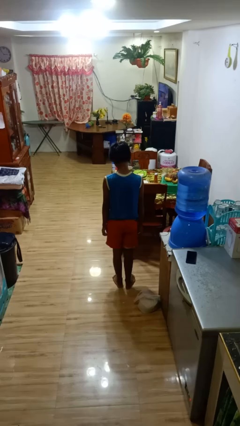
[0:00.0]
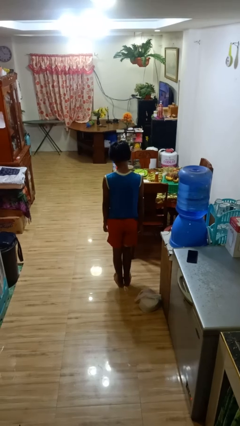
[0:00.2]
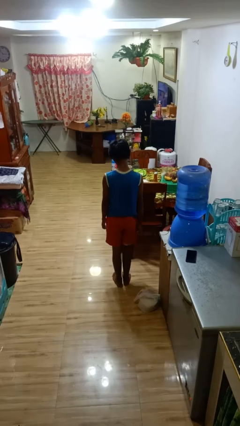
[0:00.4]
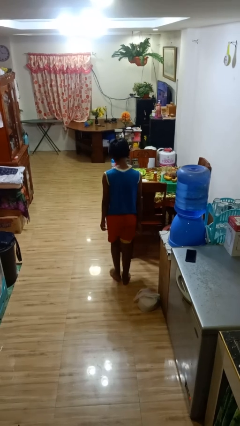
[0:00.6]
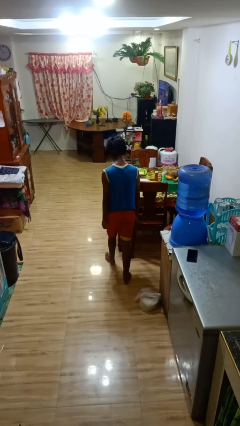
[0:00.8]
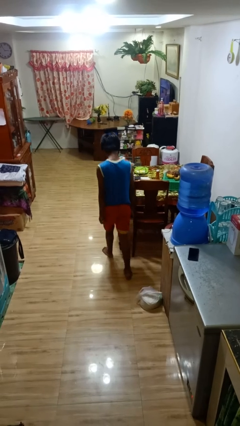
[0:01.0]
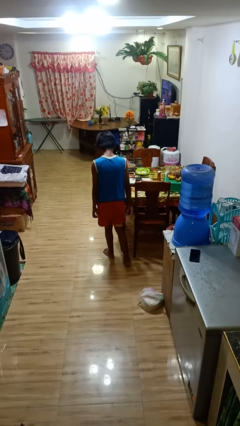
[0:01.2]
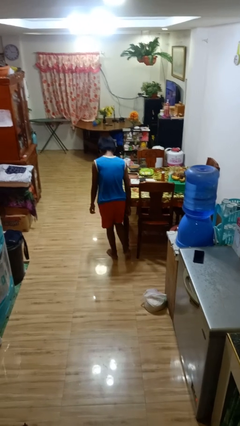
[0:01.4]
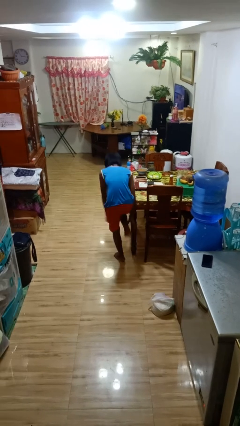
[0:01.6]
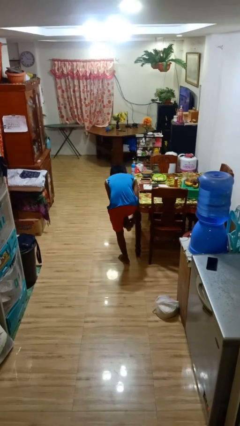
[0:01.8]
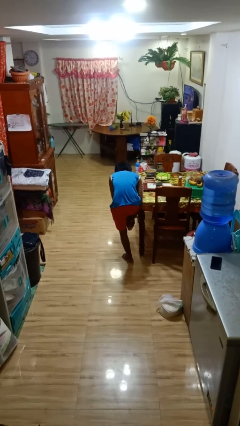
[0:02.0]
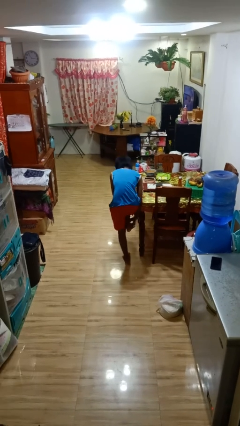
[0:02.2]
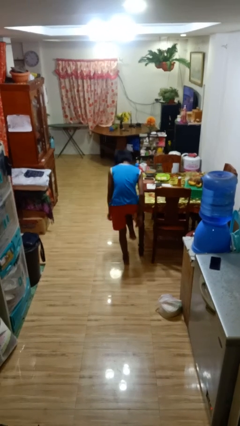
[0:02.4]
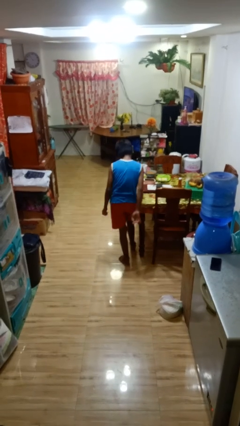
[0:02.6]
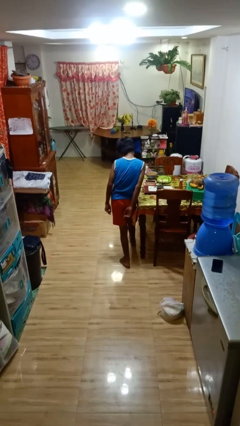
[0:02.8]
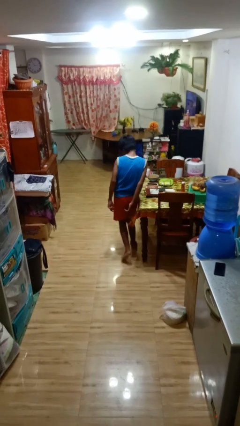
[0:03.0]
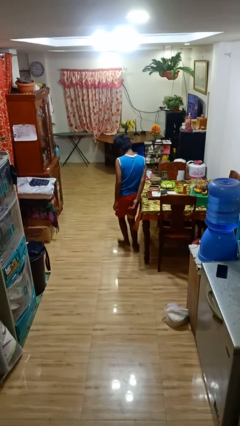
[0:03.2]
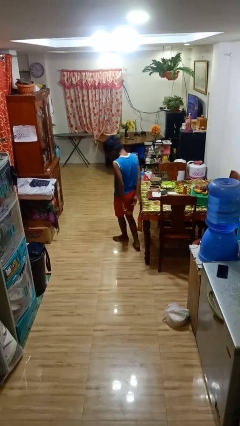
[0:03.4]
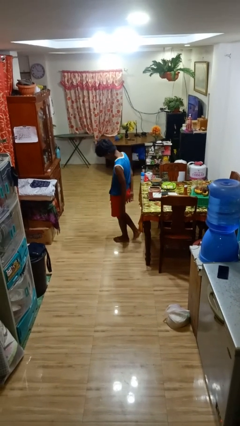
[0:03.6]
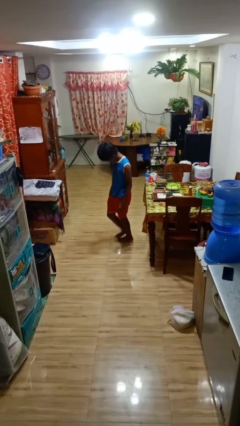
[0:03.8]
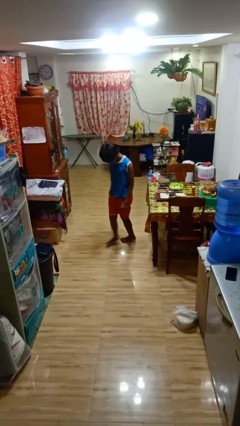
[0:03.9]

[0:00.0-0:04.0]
person bumps into table

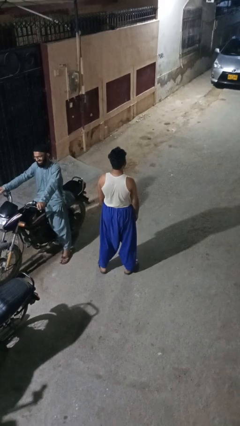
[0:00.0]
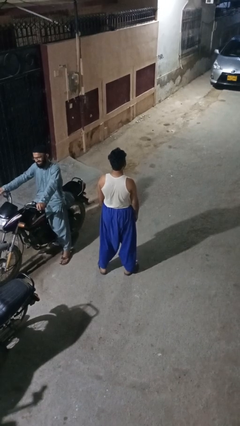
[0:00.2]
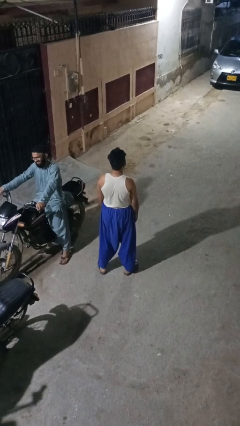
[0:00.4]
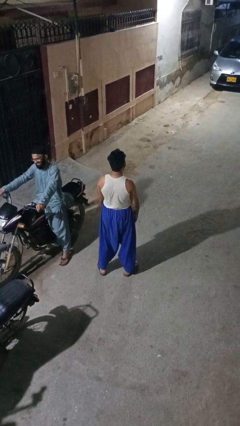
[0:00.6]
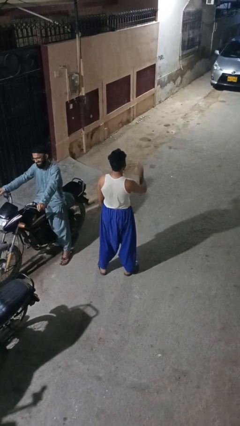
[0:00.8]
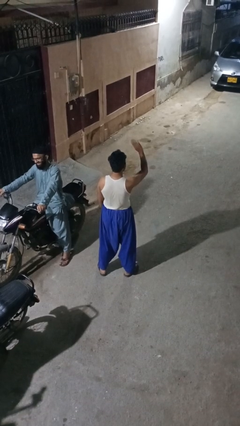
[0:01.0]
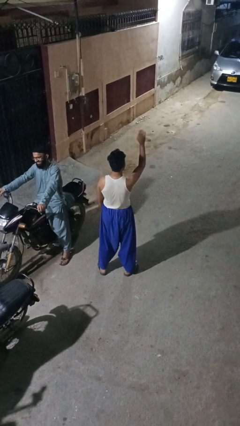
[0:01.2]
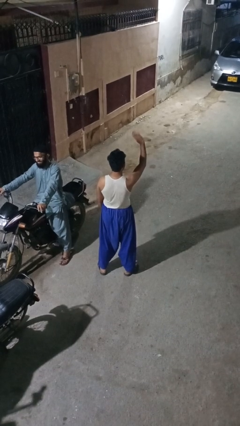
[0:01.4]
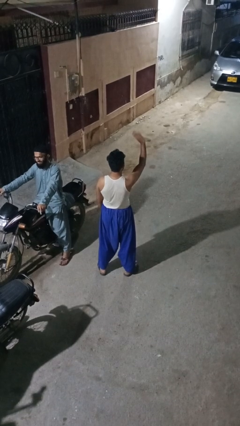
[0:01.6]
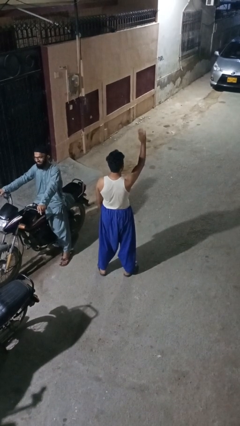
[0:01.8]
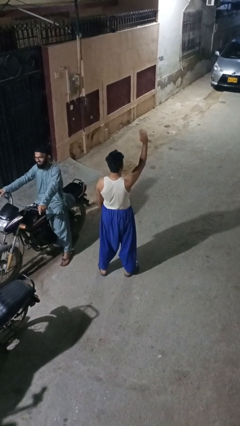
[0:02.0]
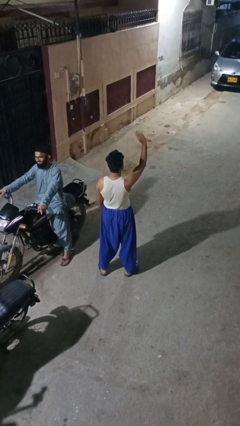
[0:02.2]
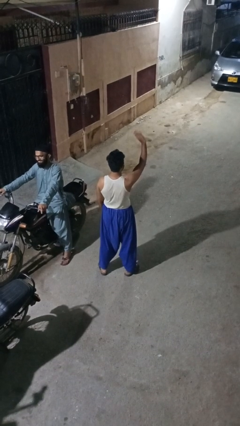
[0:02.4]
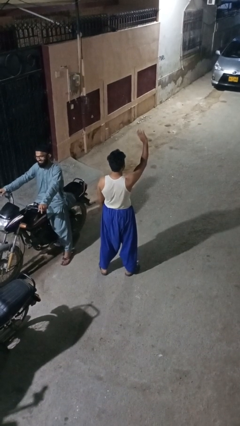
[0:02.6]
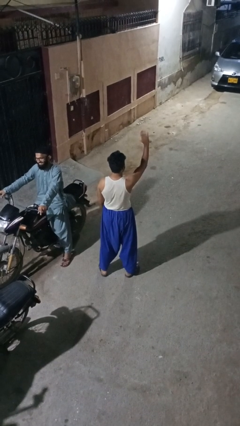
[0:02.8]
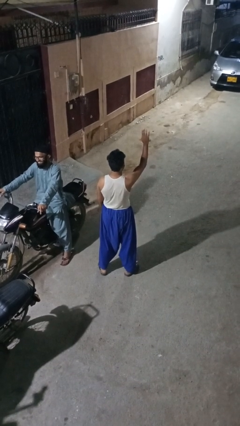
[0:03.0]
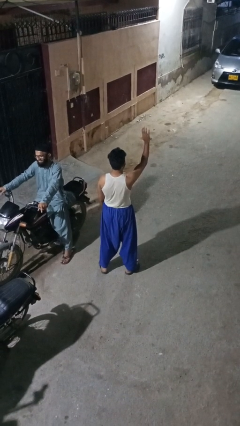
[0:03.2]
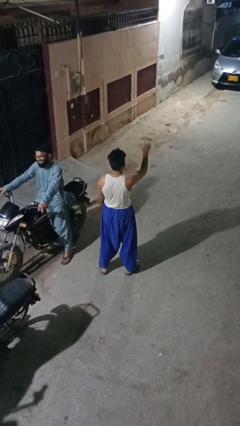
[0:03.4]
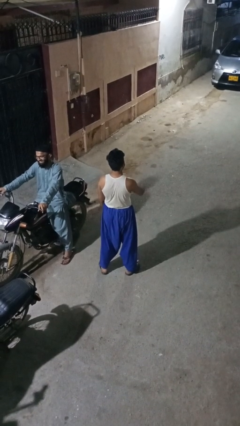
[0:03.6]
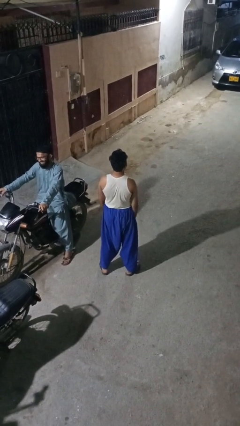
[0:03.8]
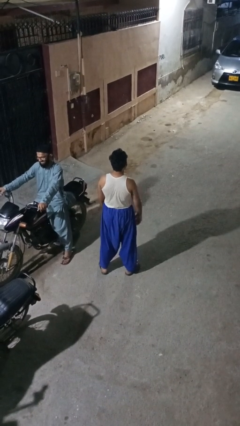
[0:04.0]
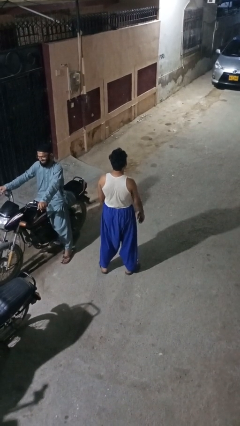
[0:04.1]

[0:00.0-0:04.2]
person waves at person

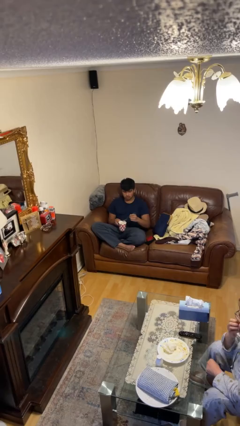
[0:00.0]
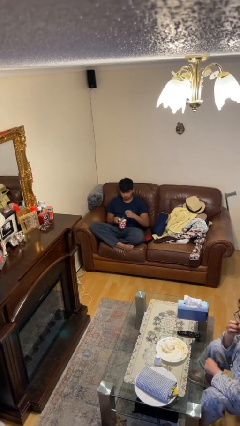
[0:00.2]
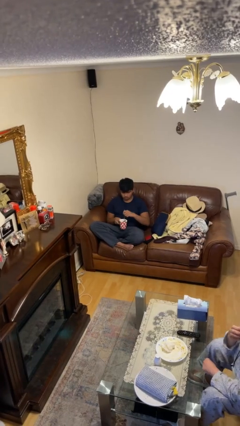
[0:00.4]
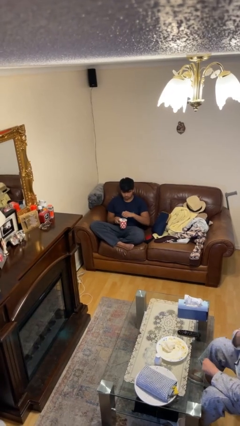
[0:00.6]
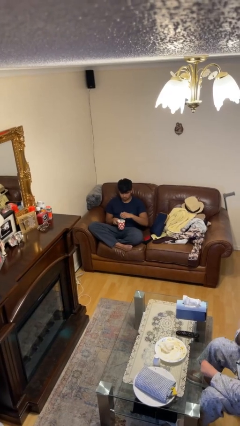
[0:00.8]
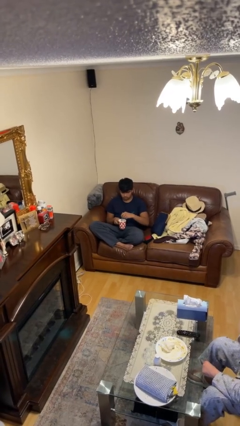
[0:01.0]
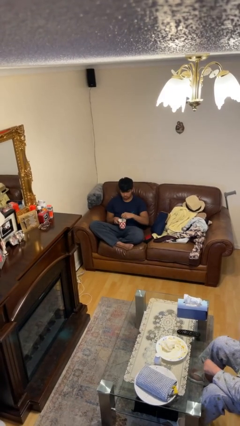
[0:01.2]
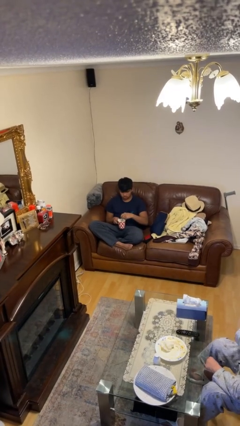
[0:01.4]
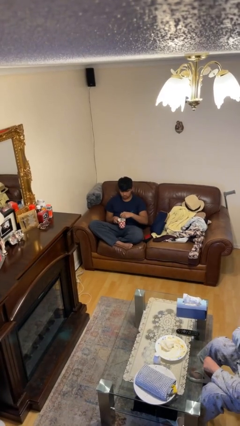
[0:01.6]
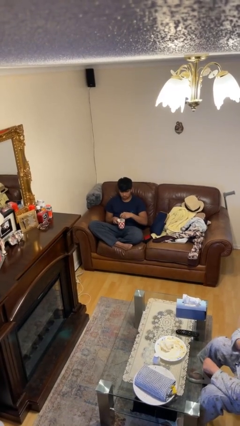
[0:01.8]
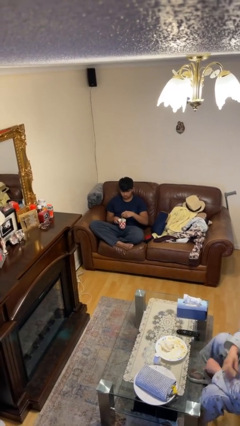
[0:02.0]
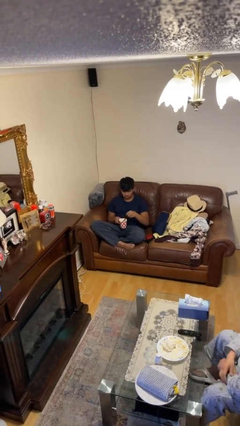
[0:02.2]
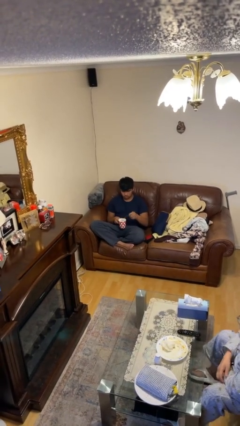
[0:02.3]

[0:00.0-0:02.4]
person stirs mug

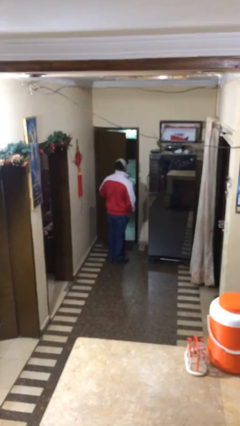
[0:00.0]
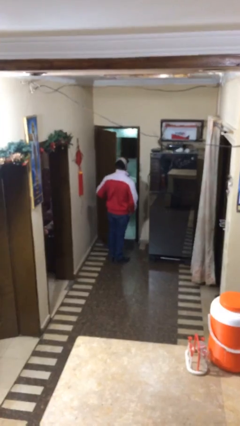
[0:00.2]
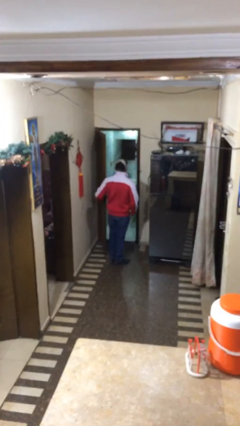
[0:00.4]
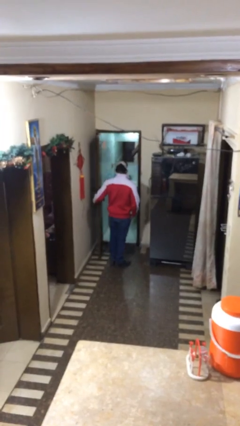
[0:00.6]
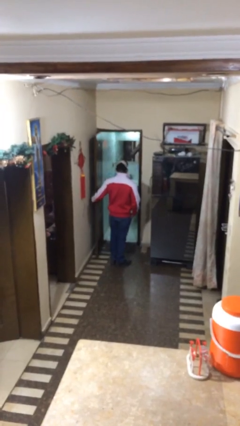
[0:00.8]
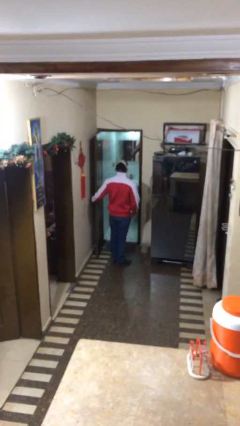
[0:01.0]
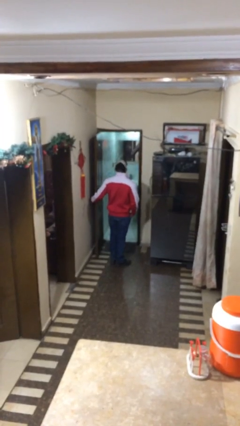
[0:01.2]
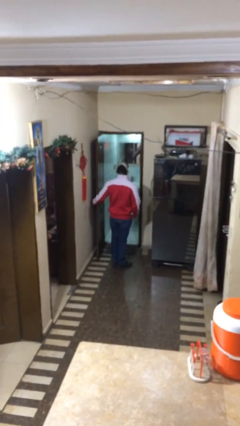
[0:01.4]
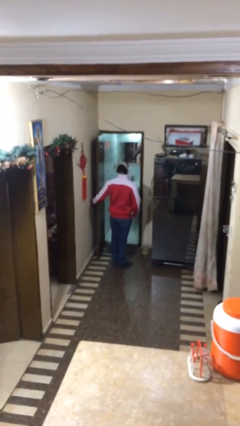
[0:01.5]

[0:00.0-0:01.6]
person opens facility door

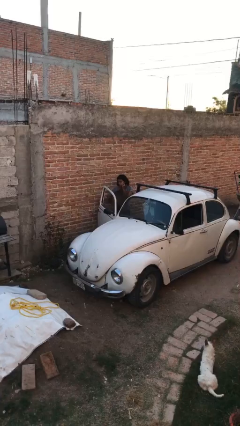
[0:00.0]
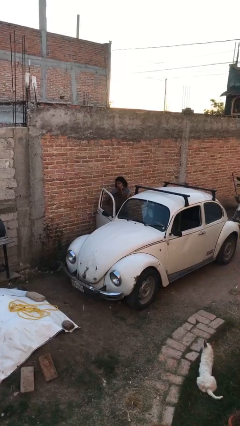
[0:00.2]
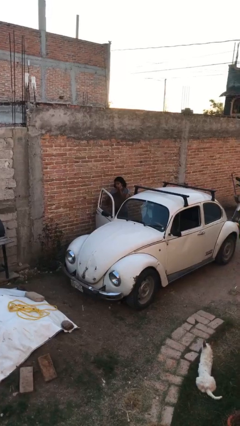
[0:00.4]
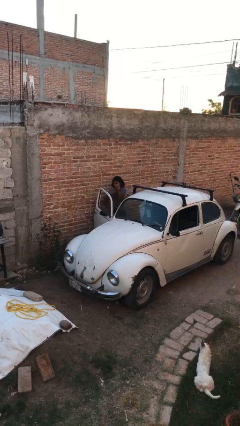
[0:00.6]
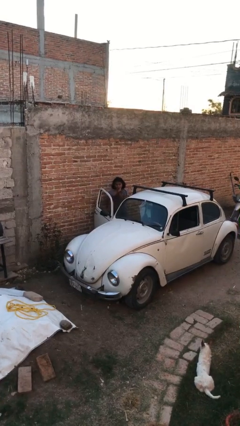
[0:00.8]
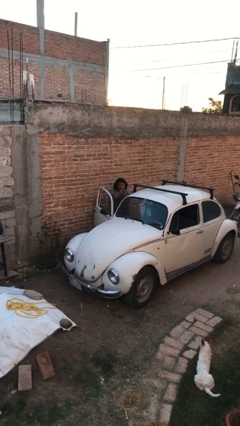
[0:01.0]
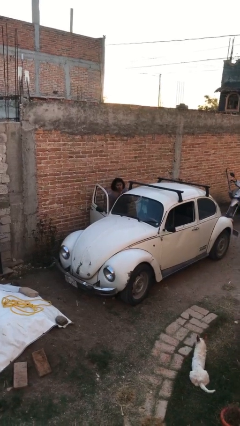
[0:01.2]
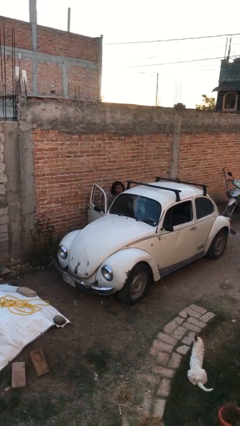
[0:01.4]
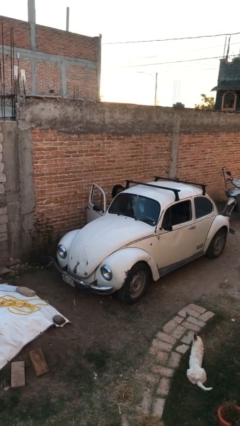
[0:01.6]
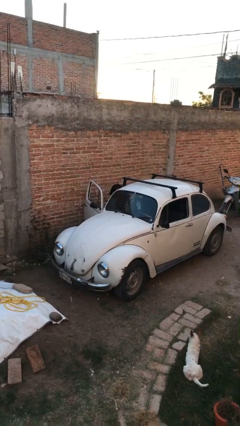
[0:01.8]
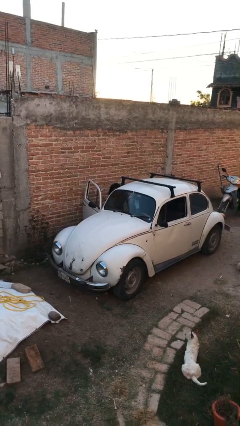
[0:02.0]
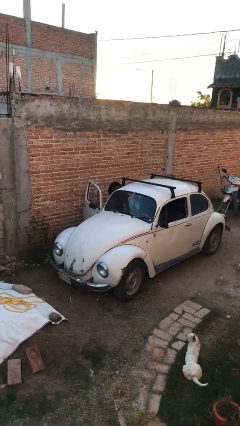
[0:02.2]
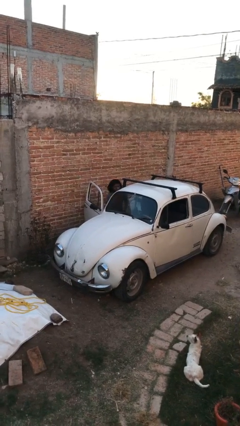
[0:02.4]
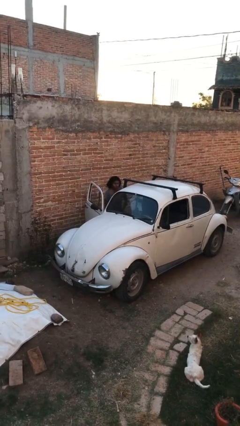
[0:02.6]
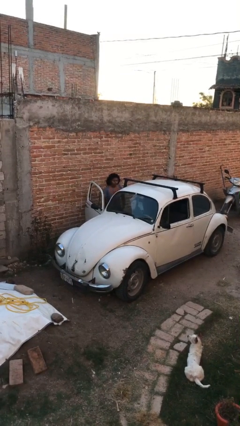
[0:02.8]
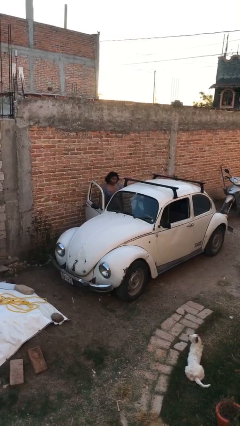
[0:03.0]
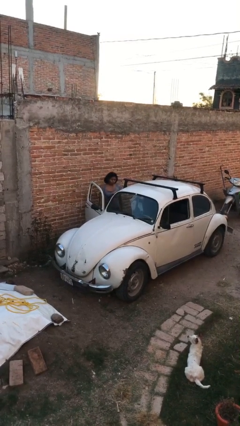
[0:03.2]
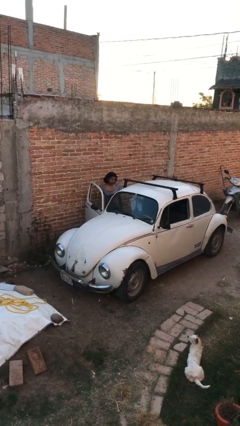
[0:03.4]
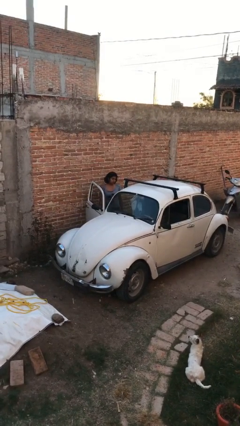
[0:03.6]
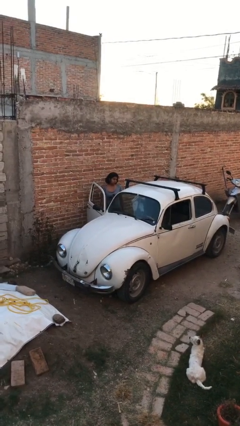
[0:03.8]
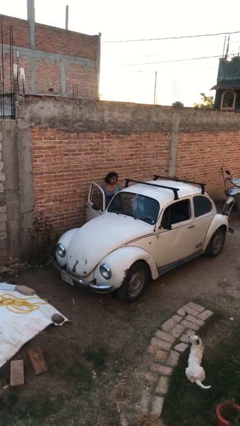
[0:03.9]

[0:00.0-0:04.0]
person loads car

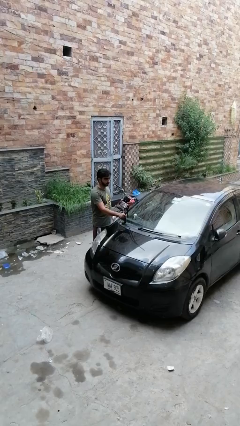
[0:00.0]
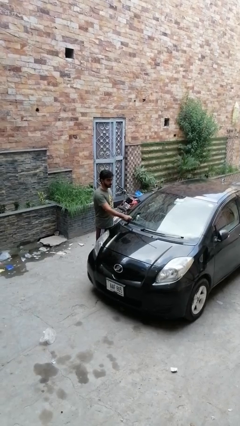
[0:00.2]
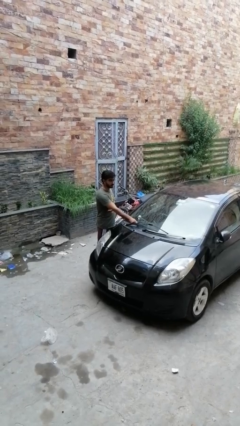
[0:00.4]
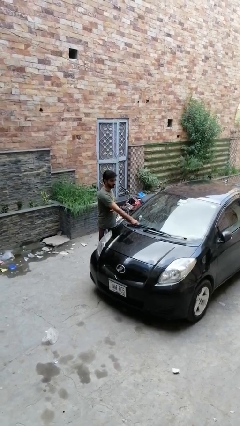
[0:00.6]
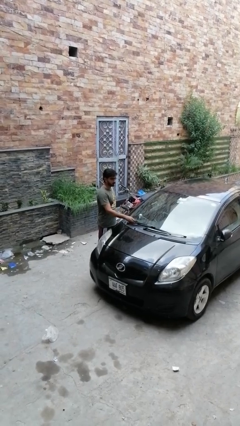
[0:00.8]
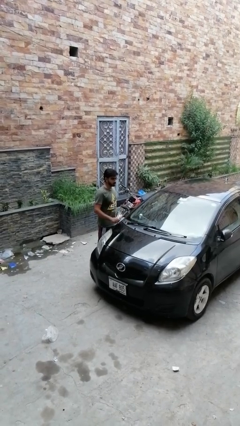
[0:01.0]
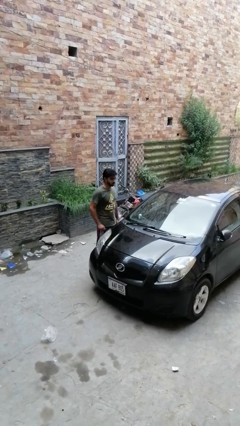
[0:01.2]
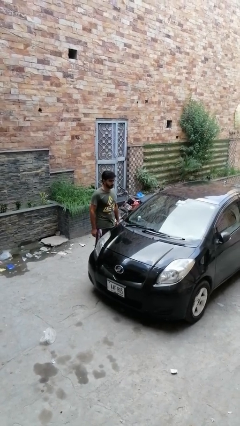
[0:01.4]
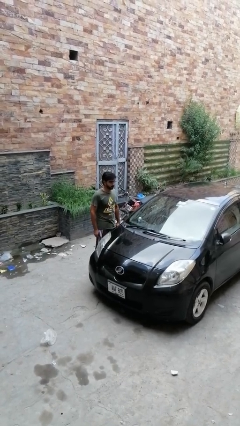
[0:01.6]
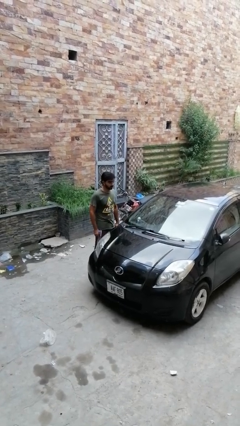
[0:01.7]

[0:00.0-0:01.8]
person flips down car wipers
